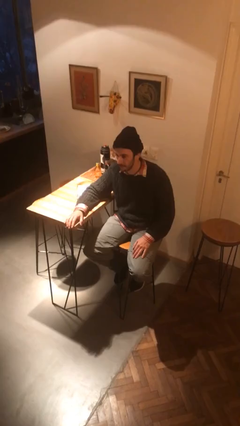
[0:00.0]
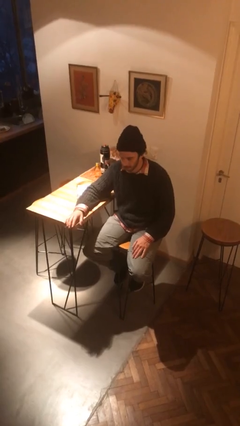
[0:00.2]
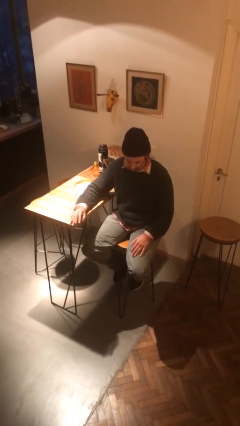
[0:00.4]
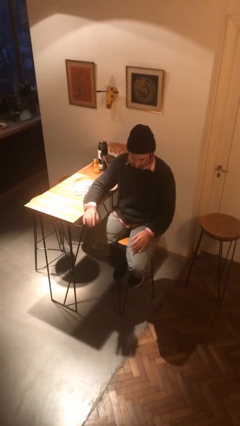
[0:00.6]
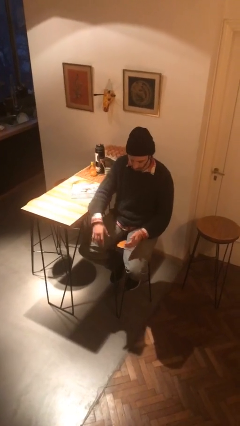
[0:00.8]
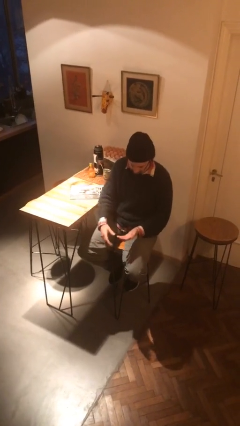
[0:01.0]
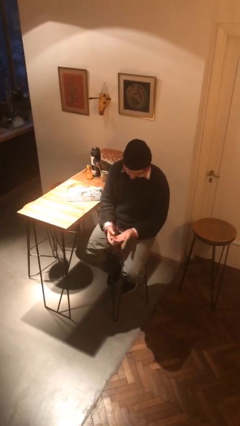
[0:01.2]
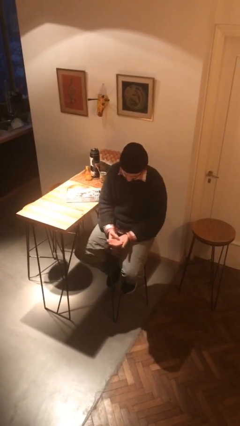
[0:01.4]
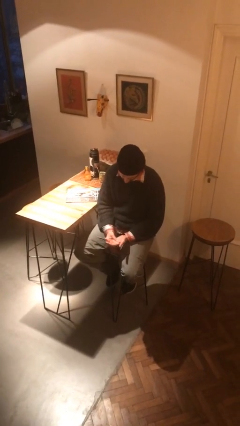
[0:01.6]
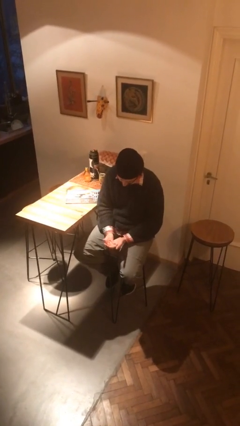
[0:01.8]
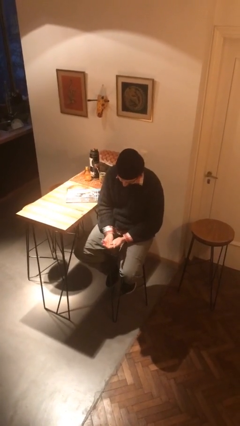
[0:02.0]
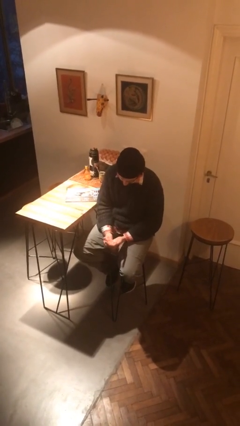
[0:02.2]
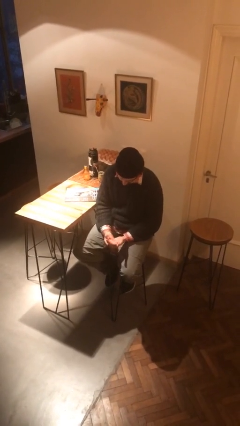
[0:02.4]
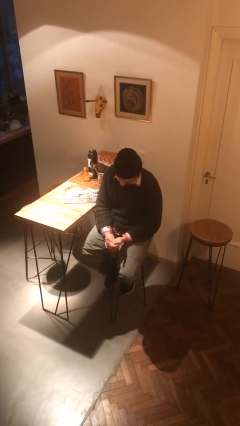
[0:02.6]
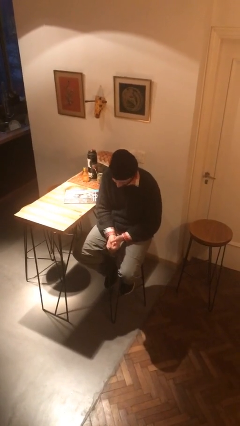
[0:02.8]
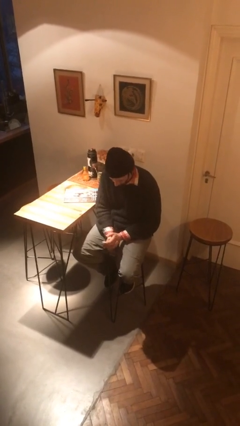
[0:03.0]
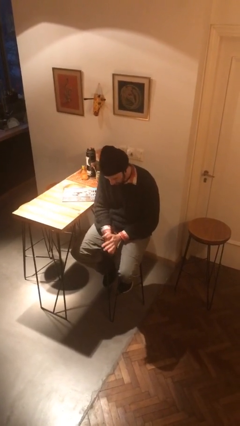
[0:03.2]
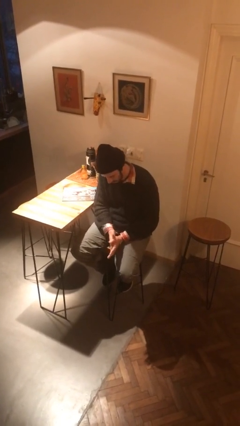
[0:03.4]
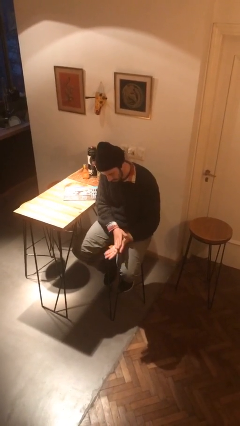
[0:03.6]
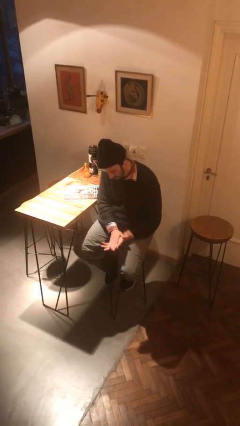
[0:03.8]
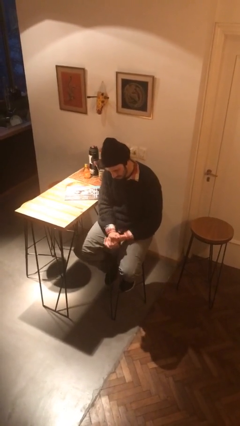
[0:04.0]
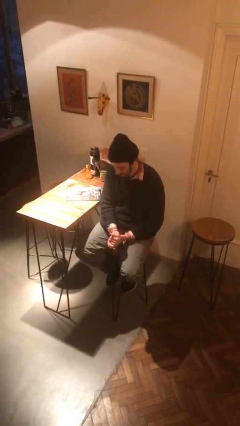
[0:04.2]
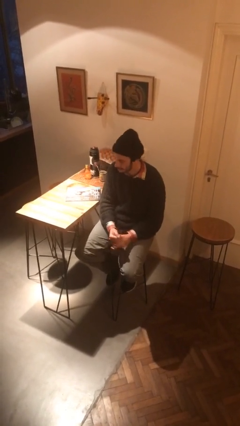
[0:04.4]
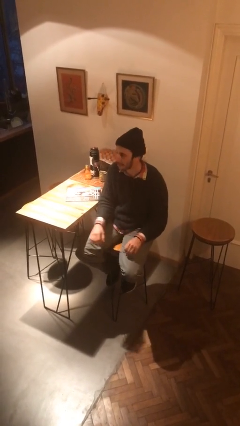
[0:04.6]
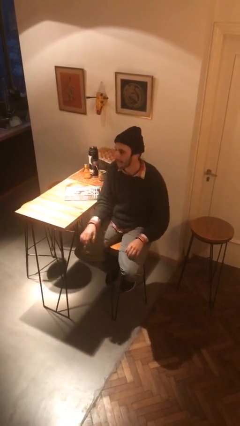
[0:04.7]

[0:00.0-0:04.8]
person looks at hands in lap

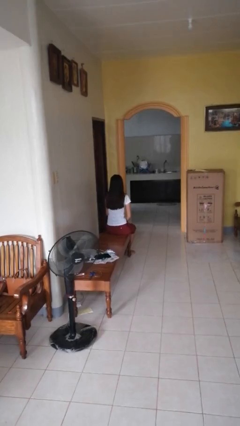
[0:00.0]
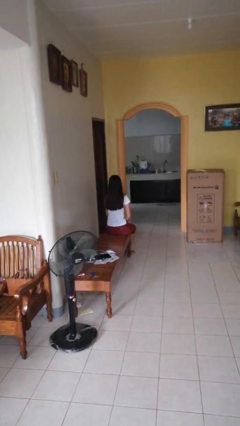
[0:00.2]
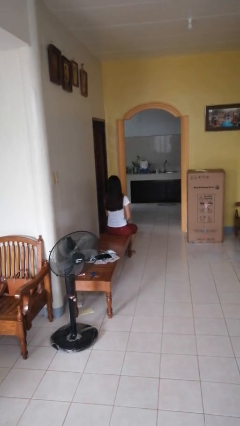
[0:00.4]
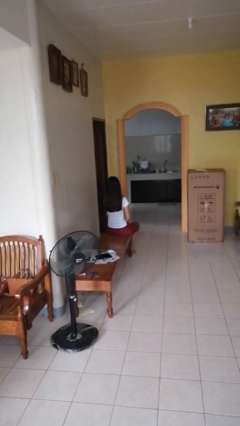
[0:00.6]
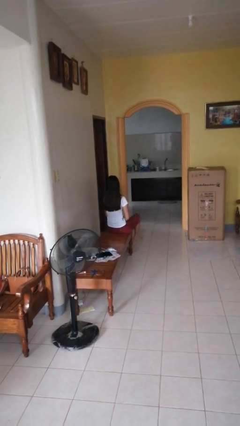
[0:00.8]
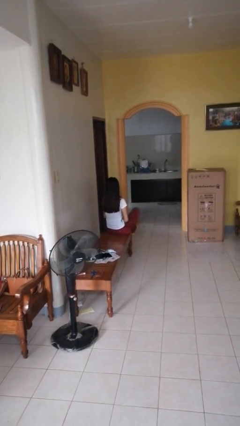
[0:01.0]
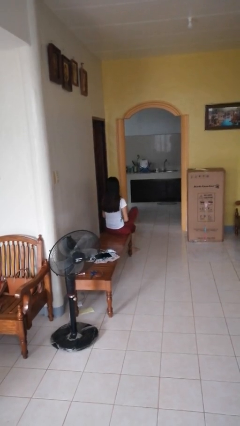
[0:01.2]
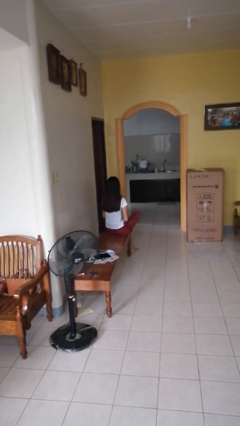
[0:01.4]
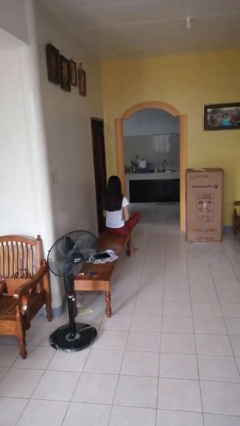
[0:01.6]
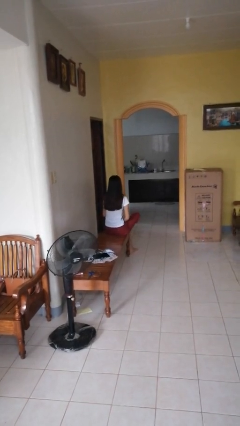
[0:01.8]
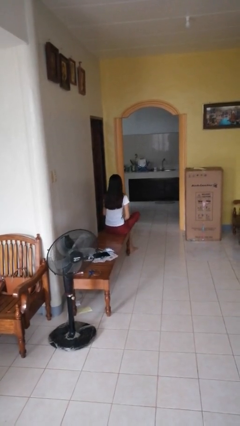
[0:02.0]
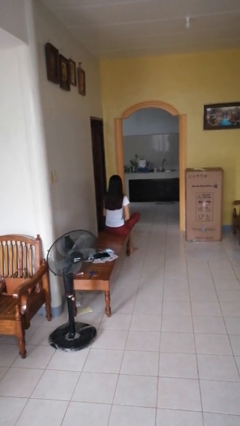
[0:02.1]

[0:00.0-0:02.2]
person crosses legs

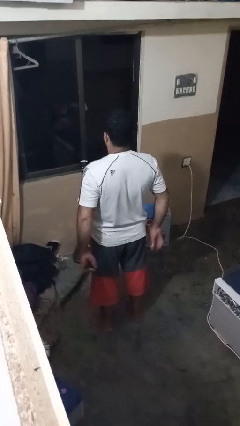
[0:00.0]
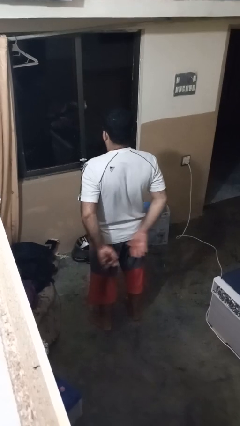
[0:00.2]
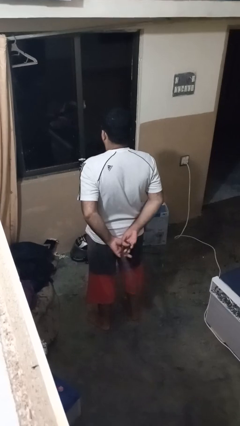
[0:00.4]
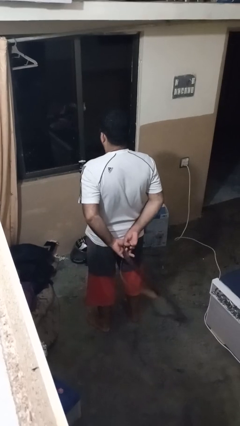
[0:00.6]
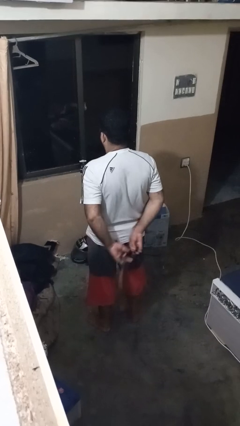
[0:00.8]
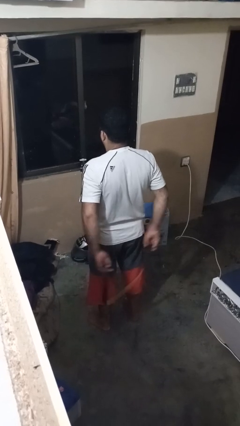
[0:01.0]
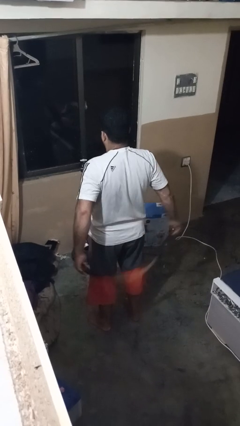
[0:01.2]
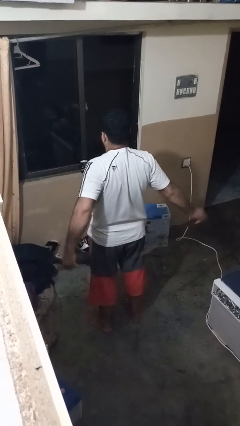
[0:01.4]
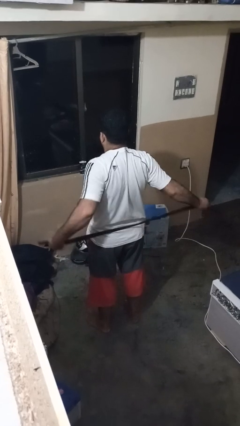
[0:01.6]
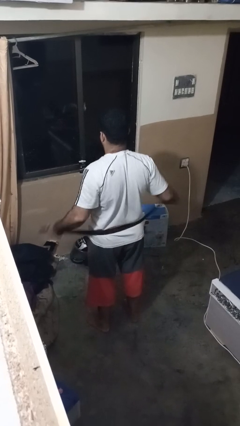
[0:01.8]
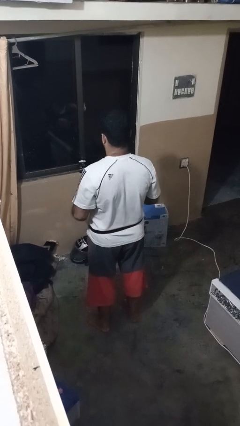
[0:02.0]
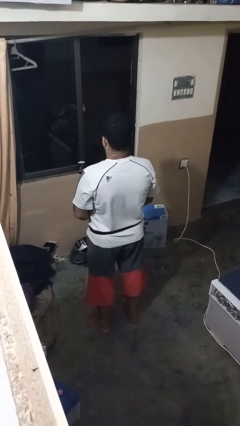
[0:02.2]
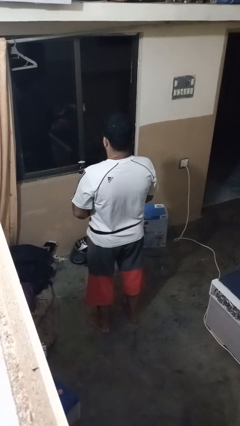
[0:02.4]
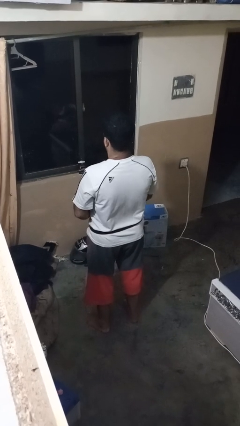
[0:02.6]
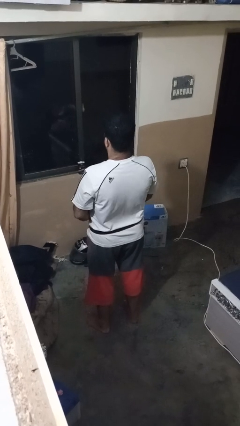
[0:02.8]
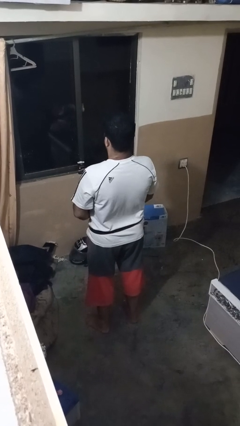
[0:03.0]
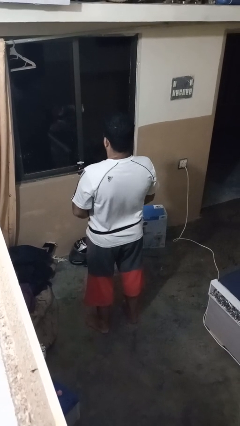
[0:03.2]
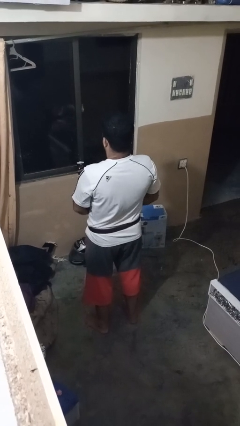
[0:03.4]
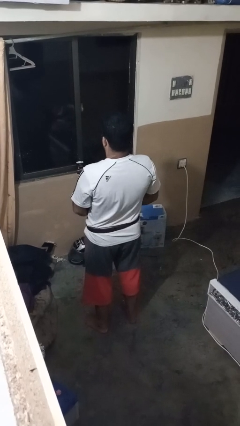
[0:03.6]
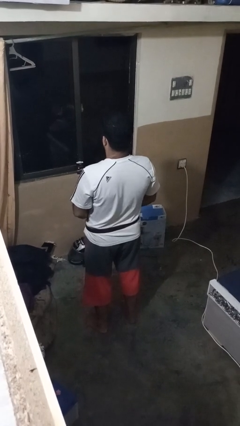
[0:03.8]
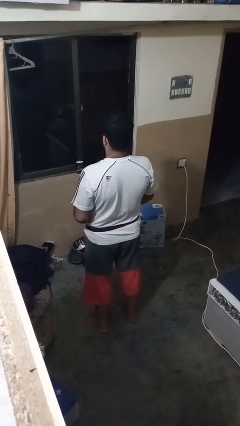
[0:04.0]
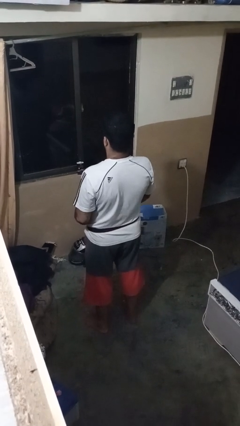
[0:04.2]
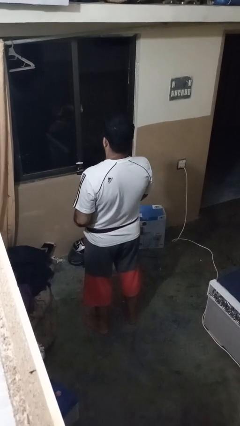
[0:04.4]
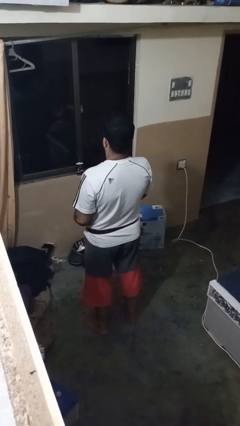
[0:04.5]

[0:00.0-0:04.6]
person puts on belt

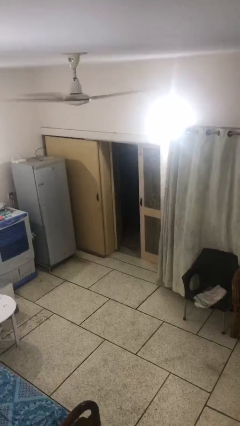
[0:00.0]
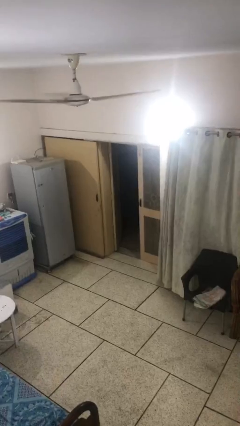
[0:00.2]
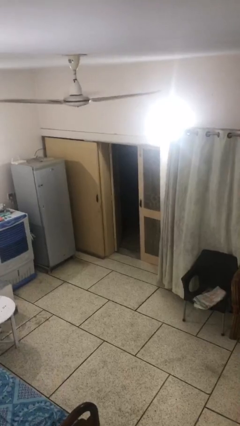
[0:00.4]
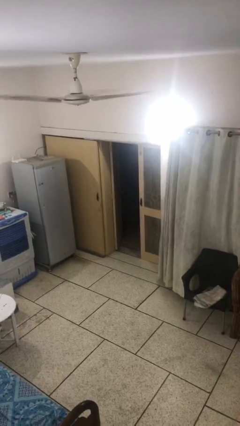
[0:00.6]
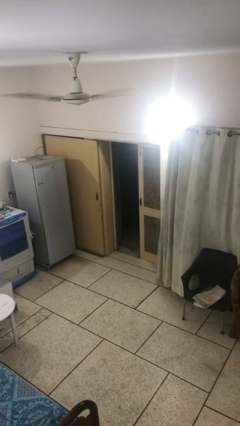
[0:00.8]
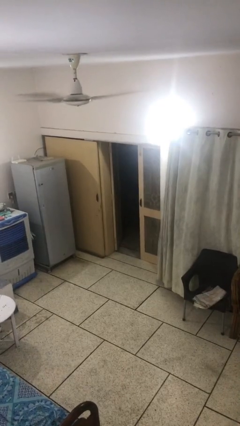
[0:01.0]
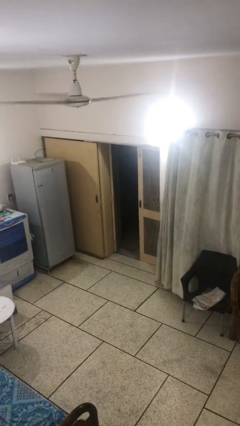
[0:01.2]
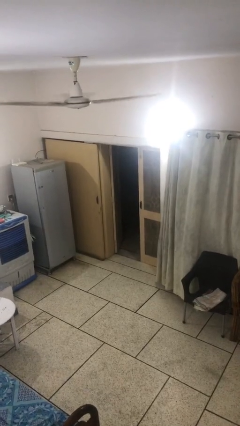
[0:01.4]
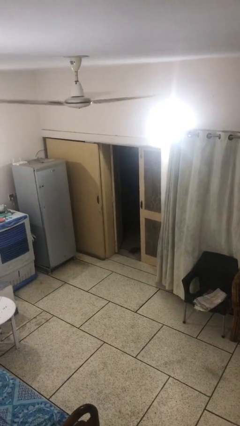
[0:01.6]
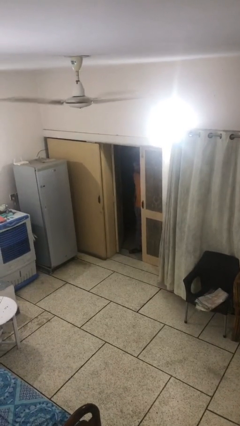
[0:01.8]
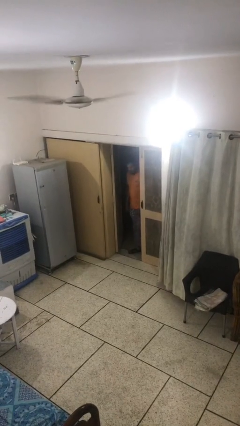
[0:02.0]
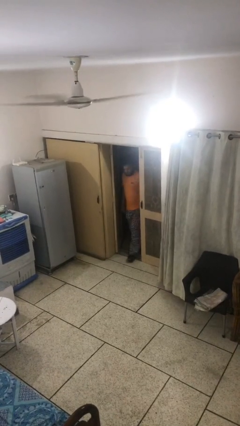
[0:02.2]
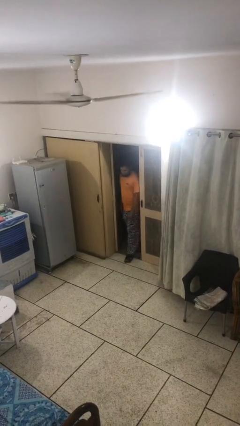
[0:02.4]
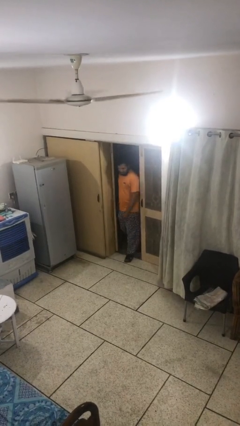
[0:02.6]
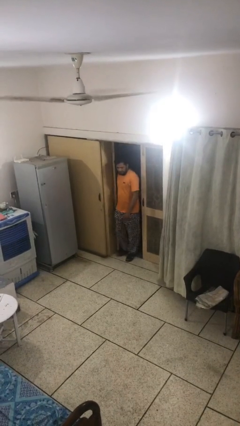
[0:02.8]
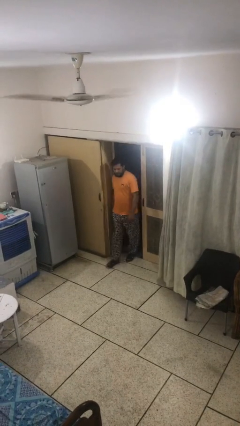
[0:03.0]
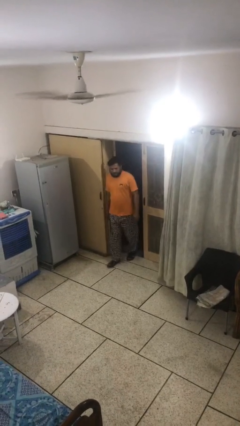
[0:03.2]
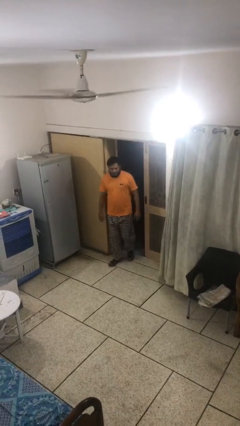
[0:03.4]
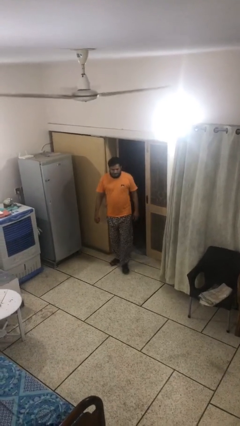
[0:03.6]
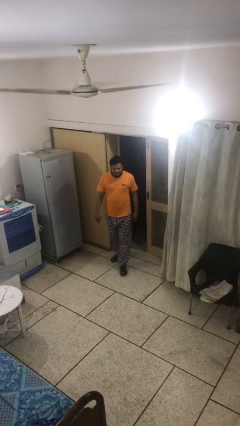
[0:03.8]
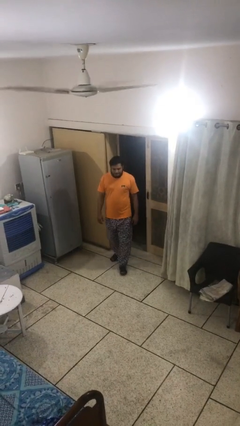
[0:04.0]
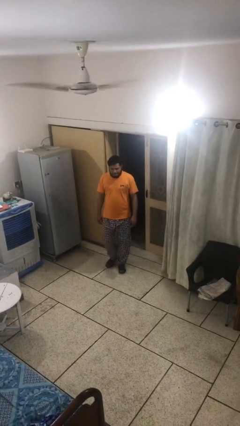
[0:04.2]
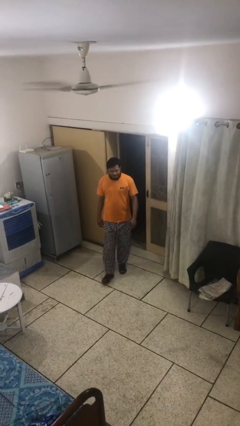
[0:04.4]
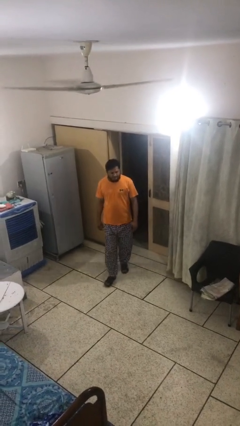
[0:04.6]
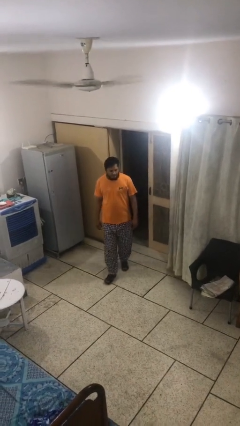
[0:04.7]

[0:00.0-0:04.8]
person enters scene through structure

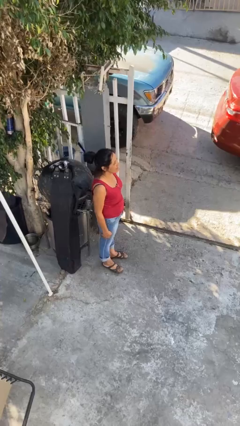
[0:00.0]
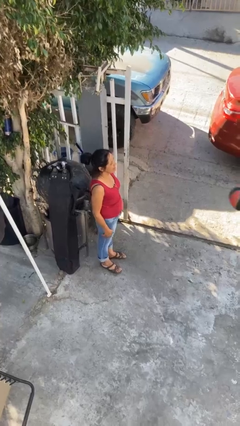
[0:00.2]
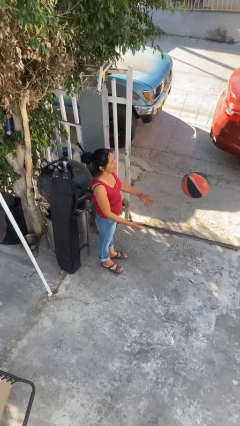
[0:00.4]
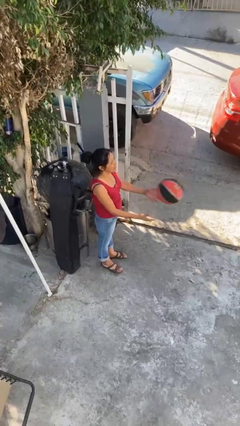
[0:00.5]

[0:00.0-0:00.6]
person catches object from person

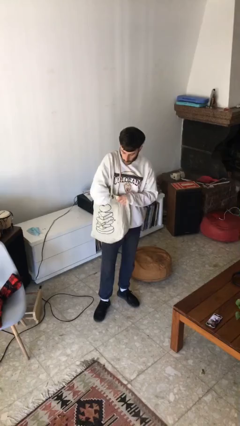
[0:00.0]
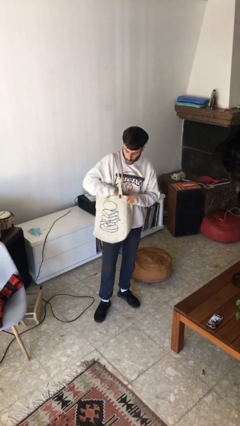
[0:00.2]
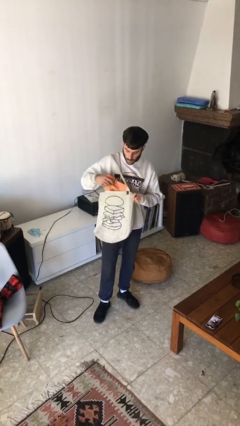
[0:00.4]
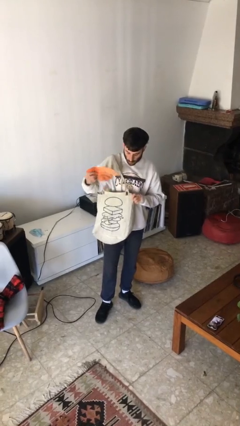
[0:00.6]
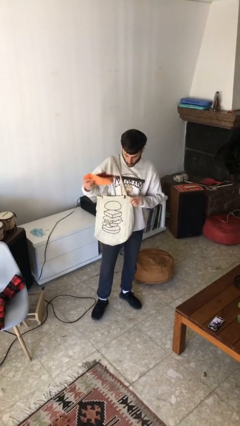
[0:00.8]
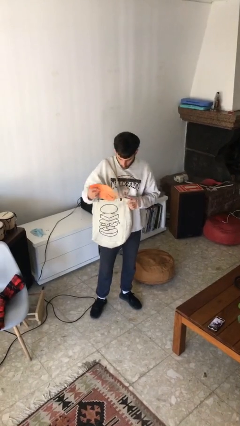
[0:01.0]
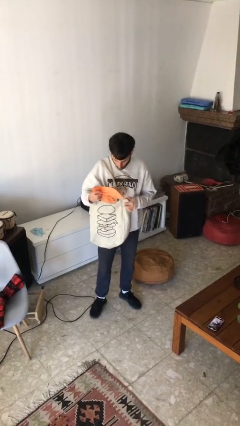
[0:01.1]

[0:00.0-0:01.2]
person takes object from purse
